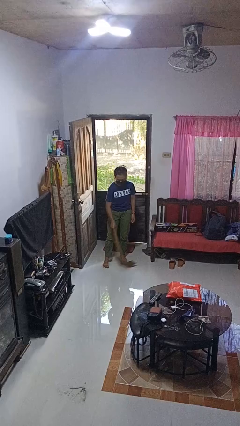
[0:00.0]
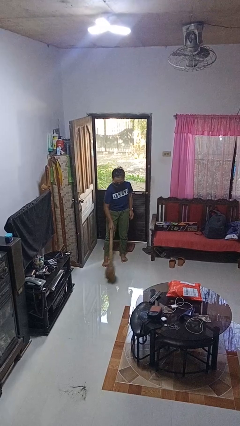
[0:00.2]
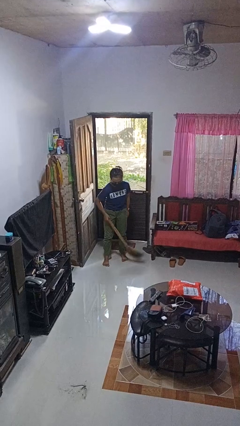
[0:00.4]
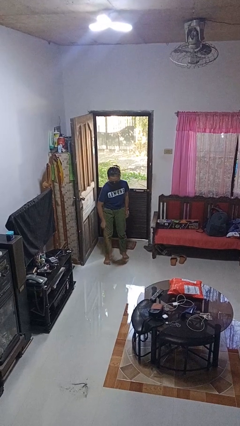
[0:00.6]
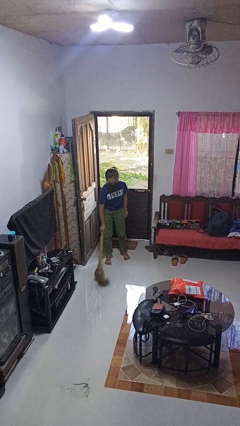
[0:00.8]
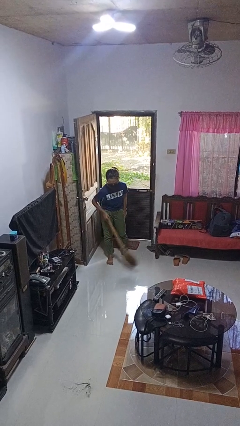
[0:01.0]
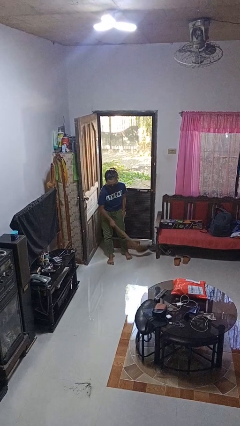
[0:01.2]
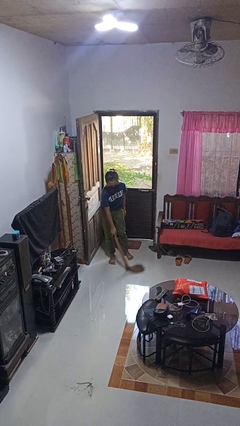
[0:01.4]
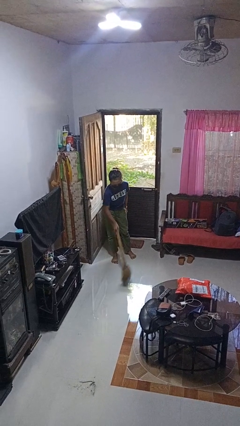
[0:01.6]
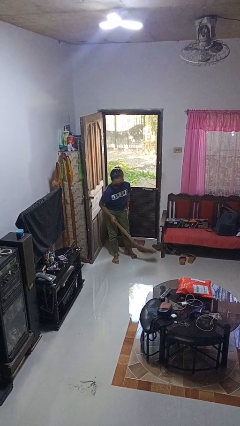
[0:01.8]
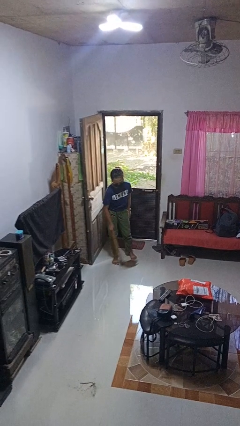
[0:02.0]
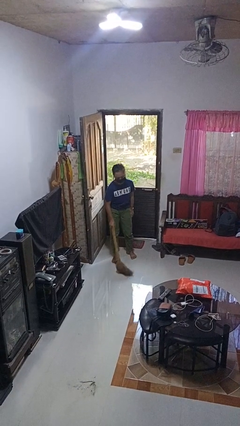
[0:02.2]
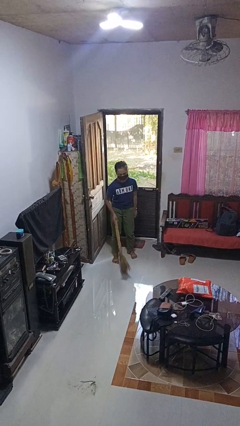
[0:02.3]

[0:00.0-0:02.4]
person sweeps floor

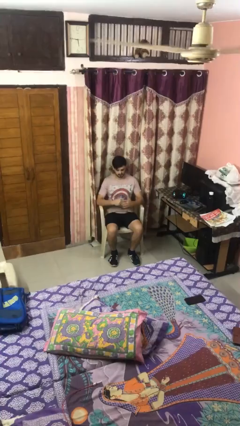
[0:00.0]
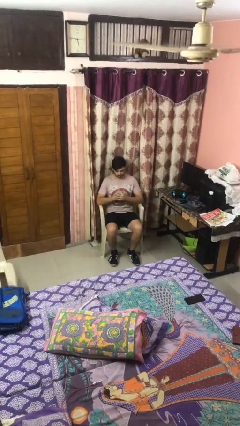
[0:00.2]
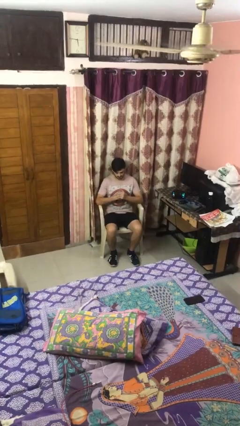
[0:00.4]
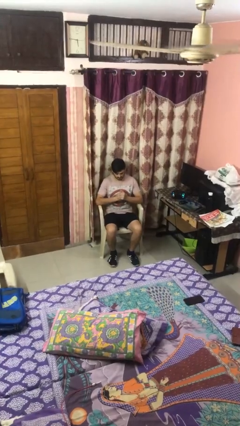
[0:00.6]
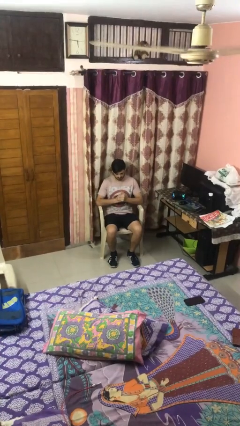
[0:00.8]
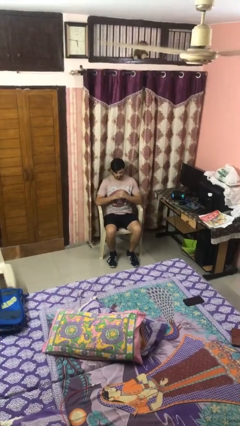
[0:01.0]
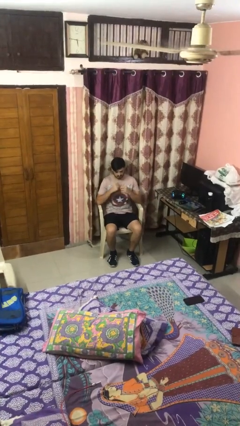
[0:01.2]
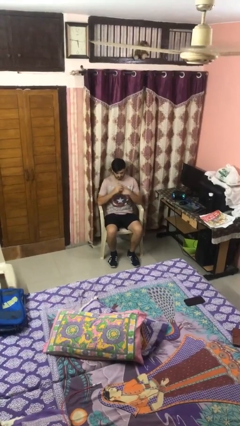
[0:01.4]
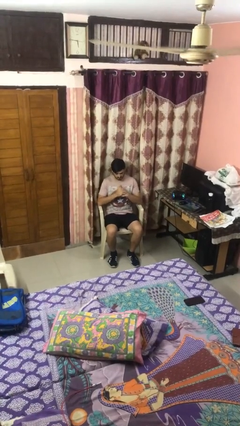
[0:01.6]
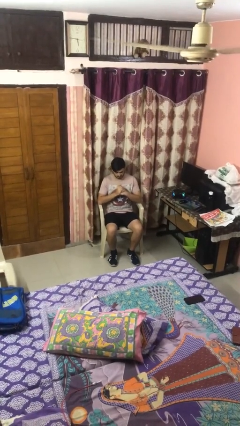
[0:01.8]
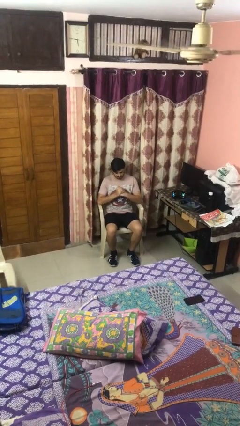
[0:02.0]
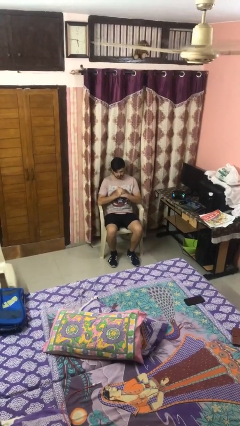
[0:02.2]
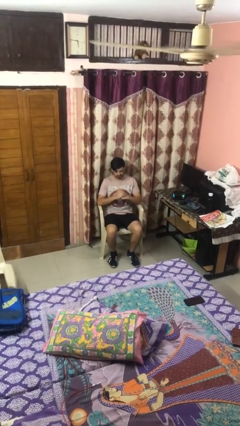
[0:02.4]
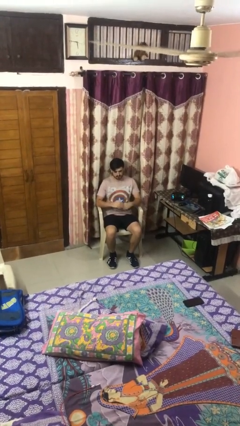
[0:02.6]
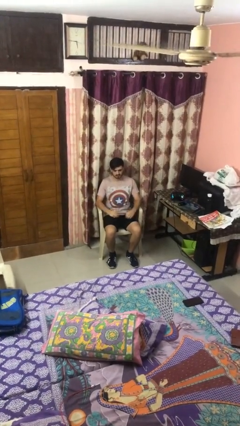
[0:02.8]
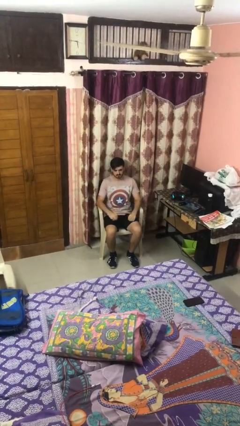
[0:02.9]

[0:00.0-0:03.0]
person cracks knuckles

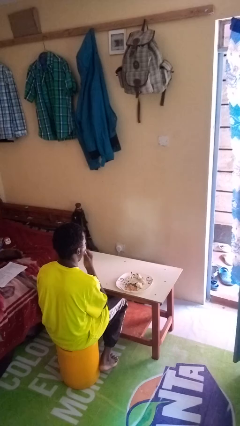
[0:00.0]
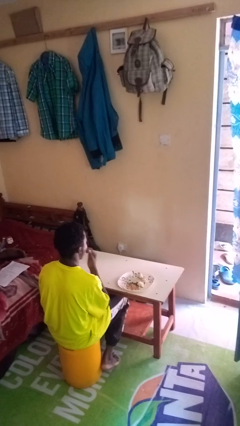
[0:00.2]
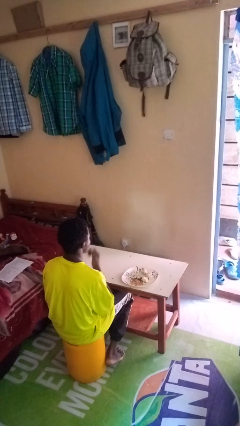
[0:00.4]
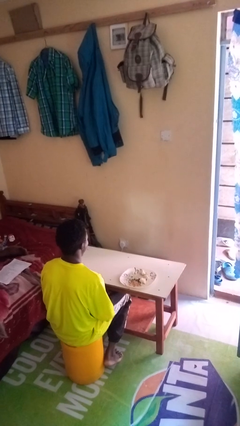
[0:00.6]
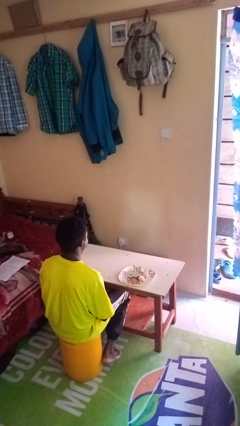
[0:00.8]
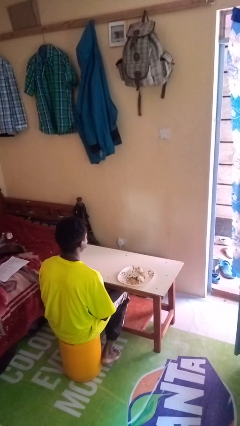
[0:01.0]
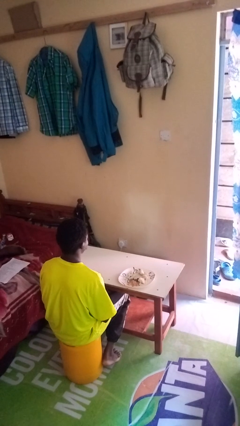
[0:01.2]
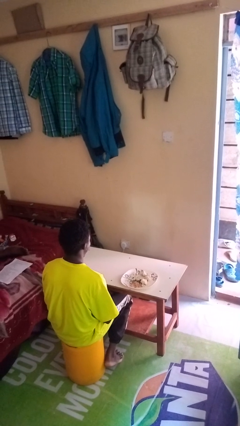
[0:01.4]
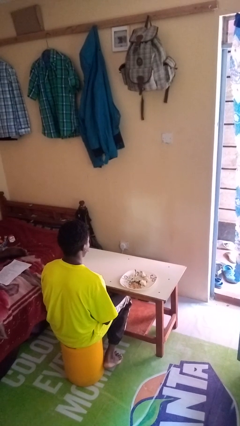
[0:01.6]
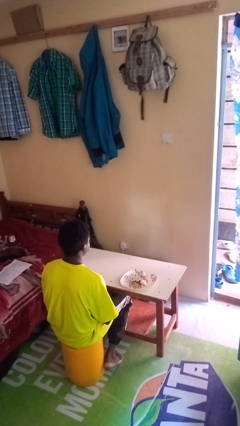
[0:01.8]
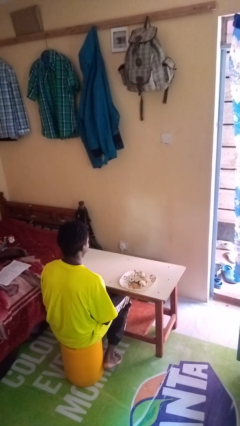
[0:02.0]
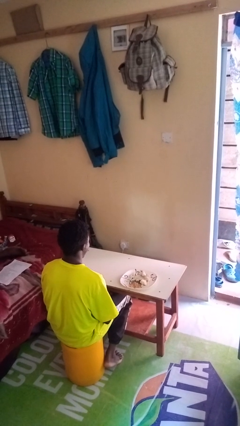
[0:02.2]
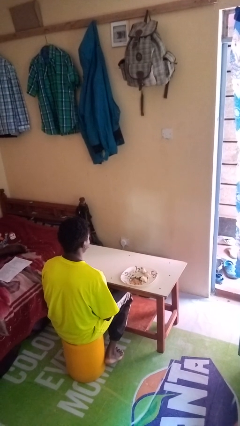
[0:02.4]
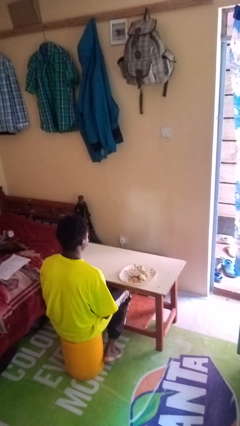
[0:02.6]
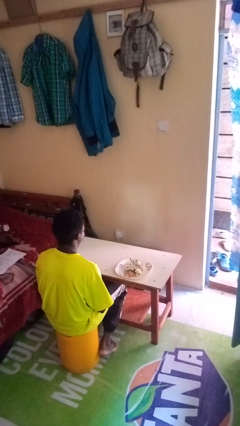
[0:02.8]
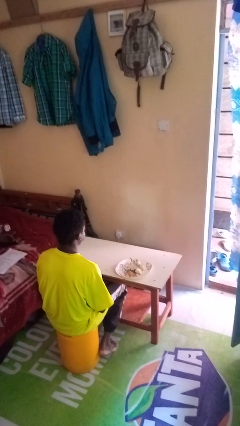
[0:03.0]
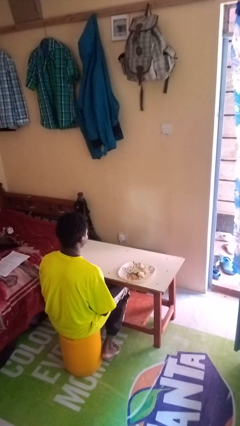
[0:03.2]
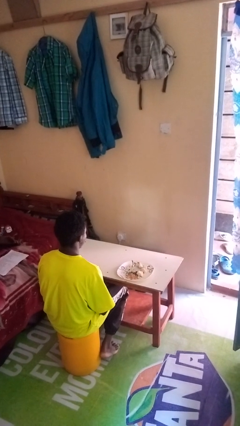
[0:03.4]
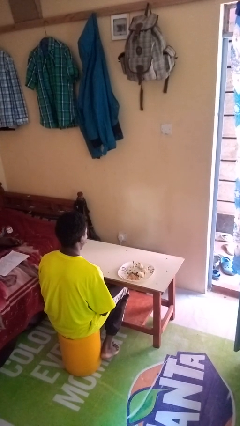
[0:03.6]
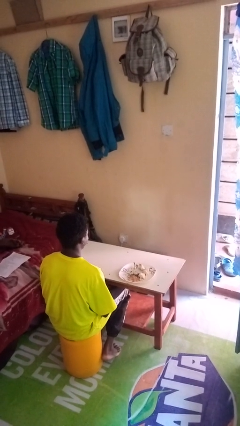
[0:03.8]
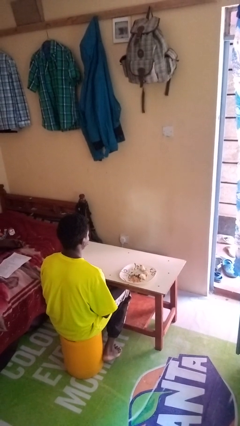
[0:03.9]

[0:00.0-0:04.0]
person eats with hands

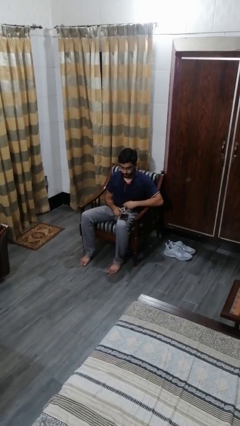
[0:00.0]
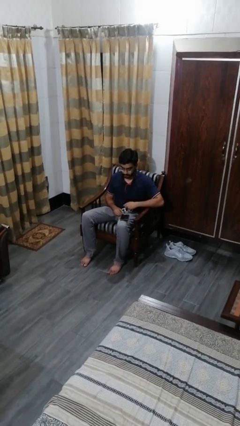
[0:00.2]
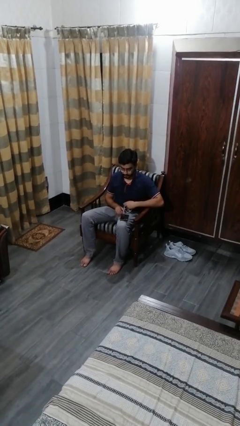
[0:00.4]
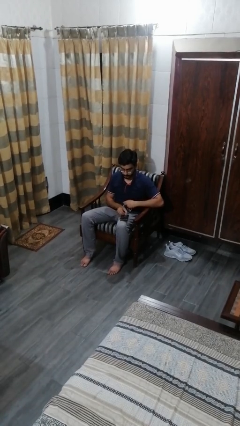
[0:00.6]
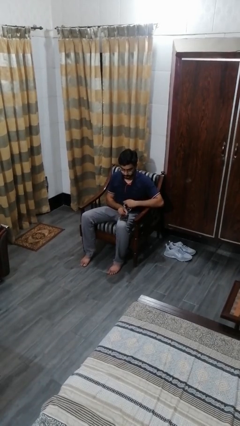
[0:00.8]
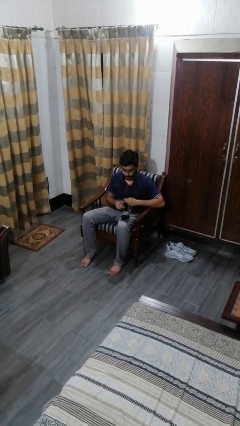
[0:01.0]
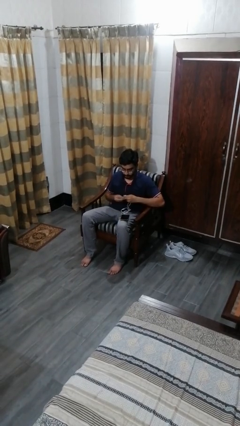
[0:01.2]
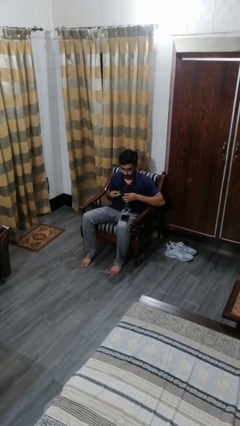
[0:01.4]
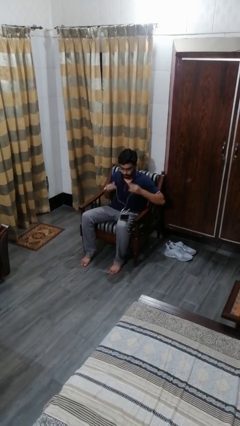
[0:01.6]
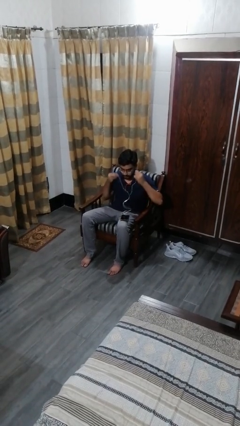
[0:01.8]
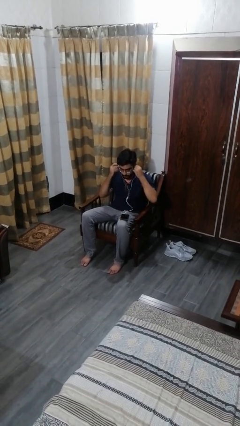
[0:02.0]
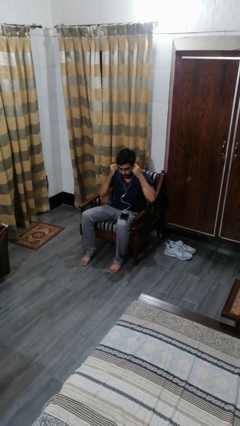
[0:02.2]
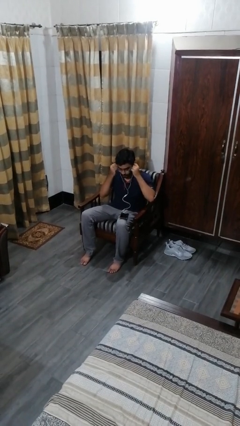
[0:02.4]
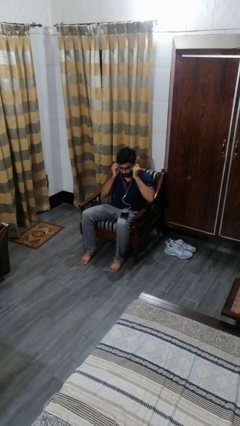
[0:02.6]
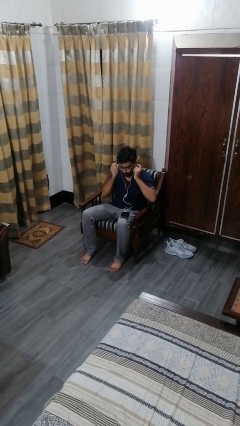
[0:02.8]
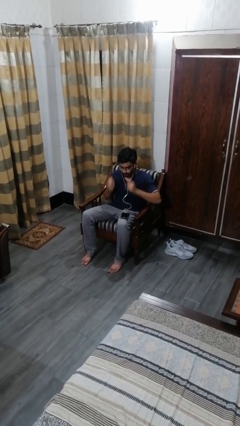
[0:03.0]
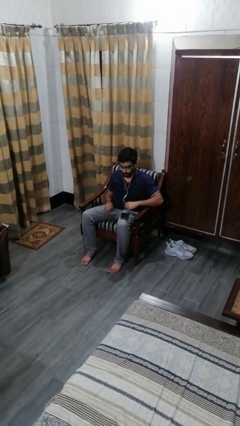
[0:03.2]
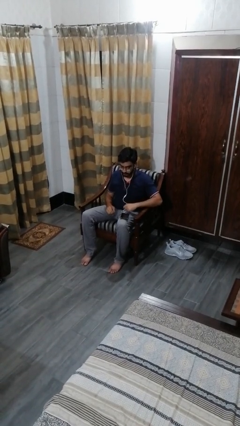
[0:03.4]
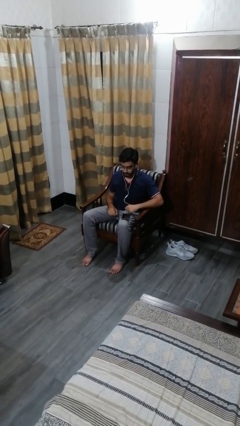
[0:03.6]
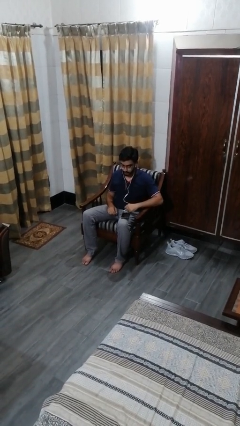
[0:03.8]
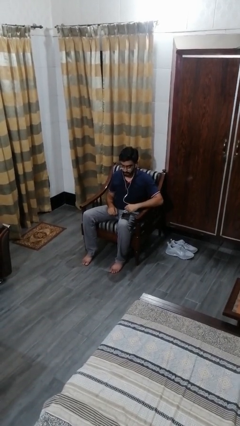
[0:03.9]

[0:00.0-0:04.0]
person puts on headphones

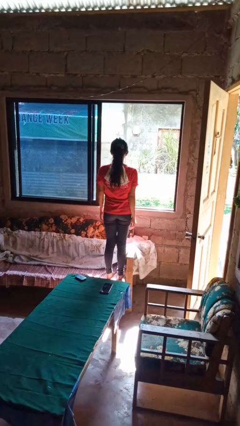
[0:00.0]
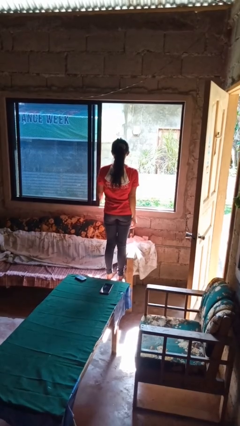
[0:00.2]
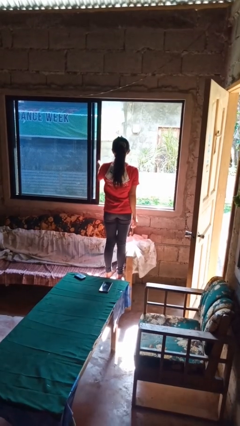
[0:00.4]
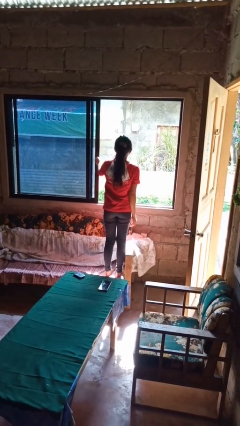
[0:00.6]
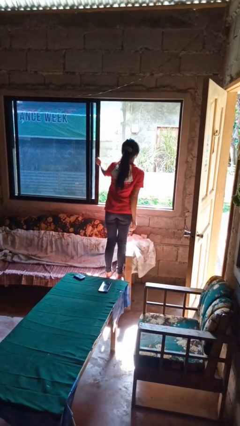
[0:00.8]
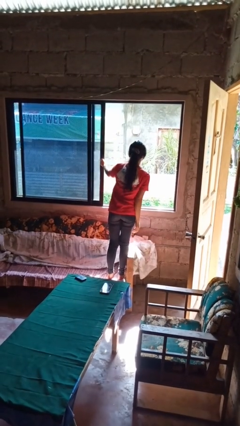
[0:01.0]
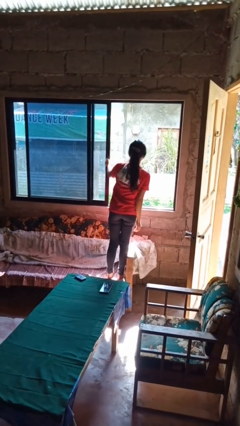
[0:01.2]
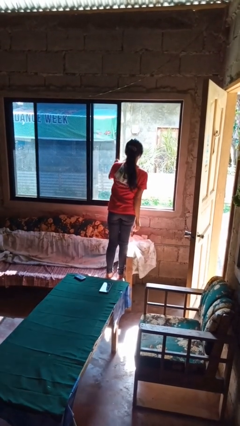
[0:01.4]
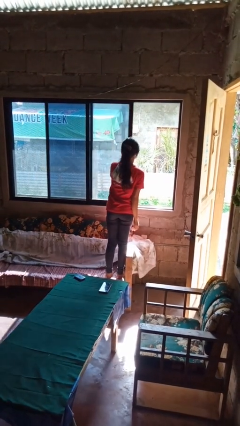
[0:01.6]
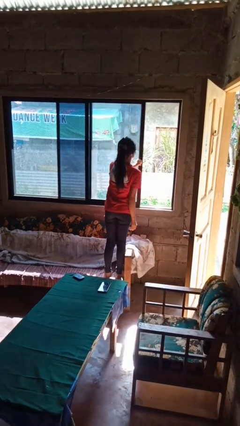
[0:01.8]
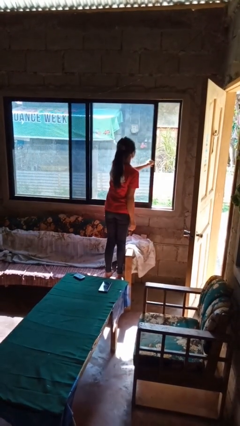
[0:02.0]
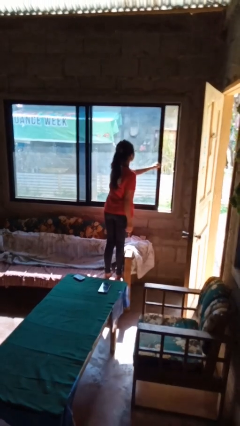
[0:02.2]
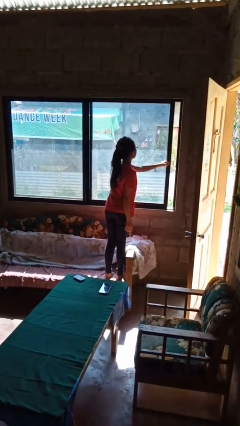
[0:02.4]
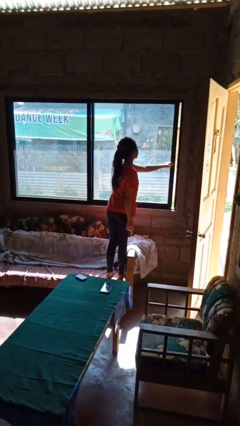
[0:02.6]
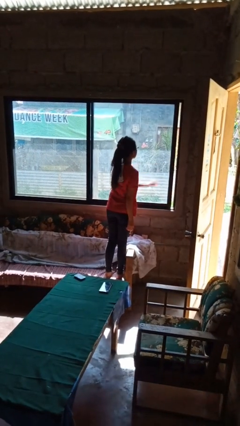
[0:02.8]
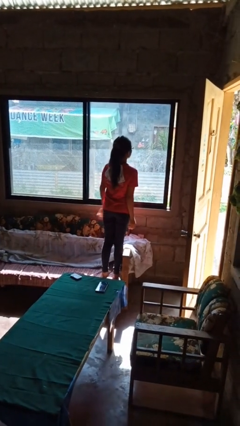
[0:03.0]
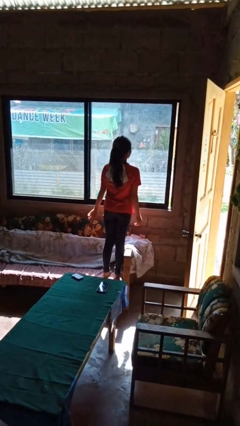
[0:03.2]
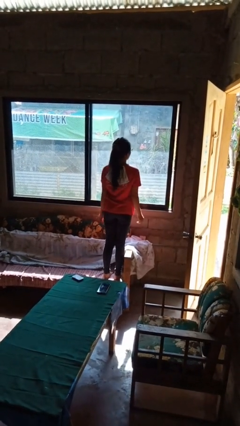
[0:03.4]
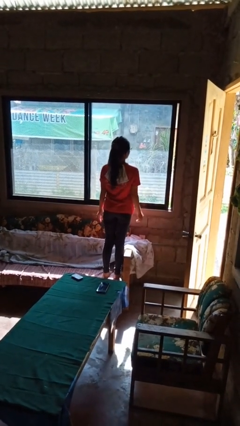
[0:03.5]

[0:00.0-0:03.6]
person closes home window

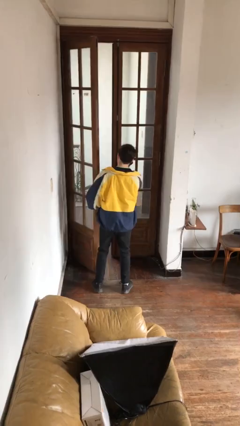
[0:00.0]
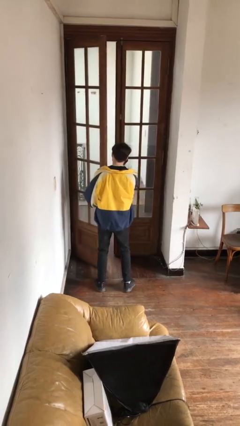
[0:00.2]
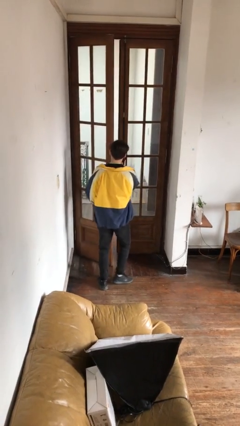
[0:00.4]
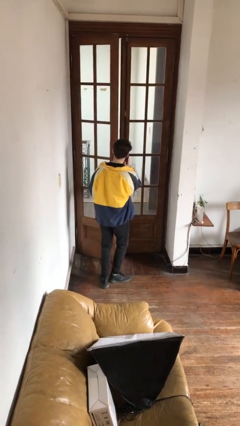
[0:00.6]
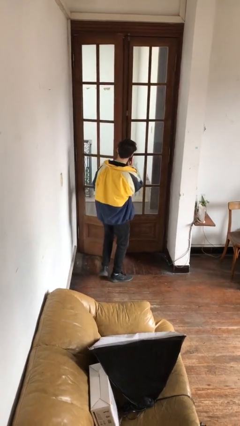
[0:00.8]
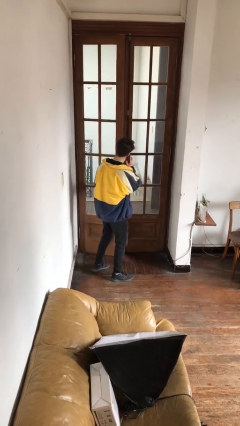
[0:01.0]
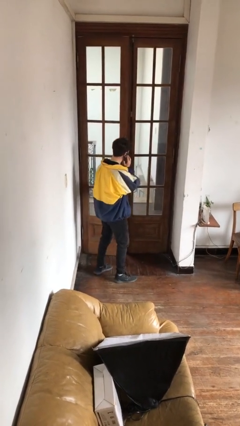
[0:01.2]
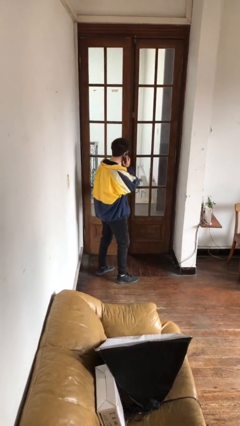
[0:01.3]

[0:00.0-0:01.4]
person closes facility door
